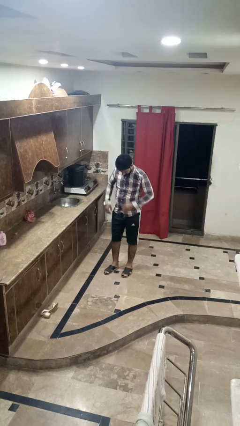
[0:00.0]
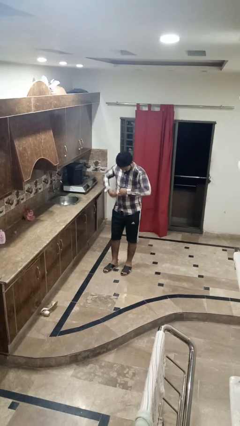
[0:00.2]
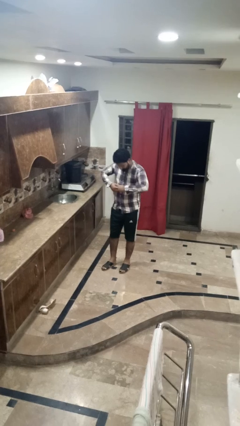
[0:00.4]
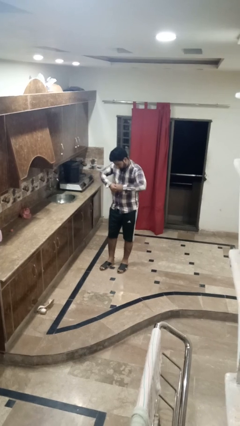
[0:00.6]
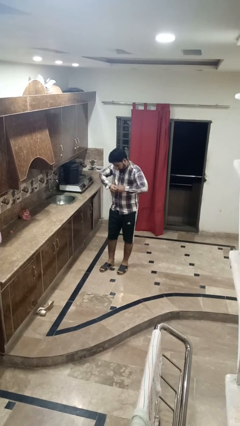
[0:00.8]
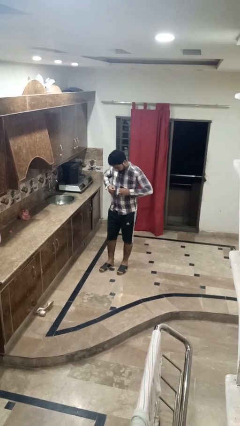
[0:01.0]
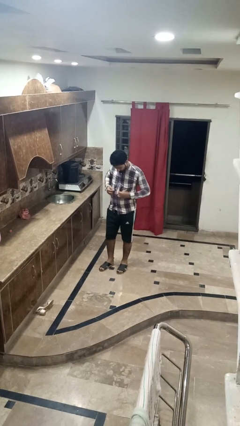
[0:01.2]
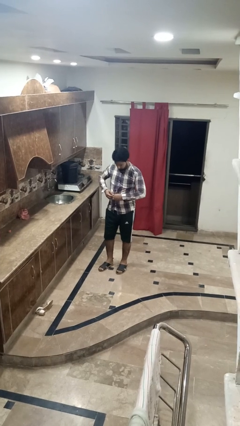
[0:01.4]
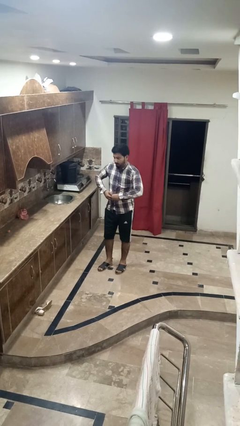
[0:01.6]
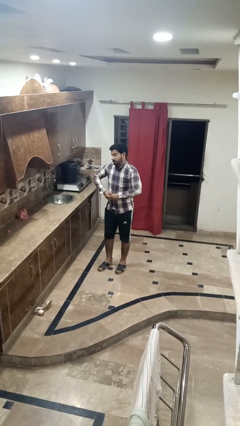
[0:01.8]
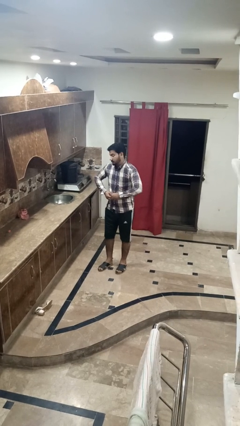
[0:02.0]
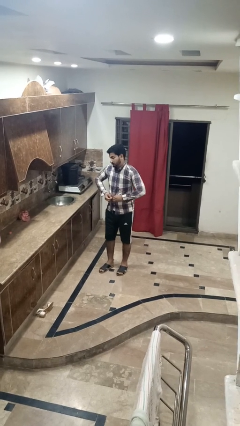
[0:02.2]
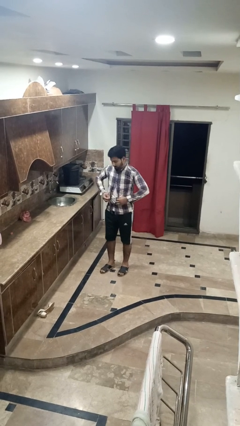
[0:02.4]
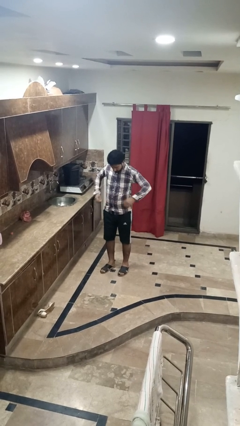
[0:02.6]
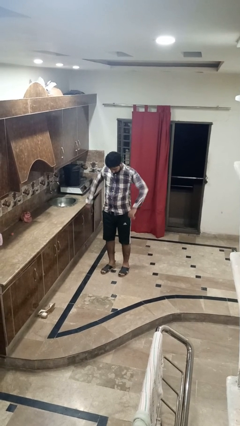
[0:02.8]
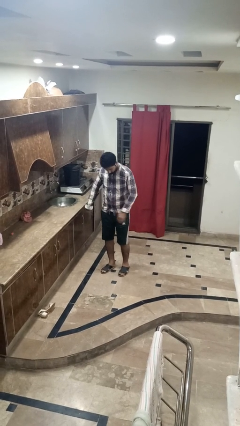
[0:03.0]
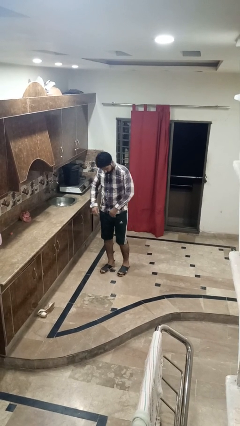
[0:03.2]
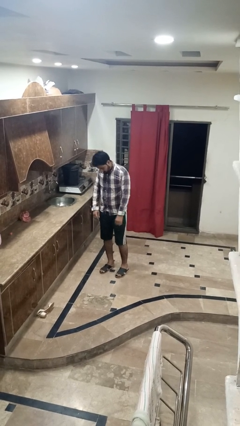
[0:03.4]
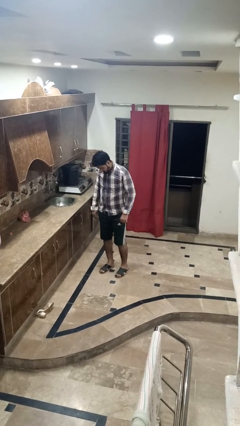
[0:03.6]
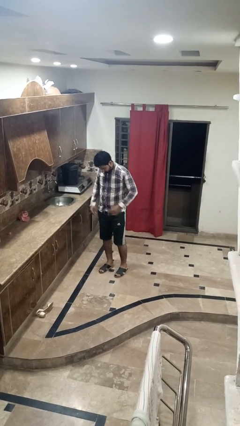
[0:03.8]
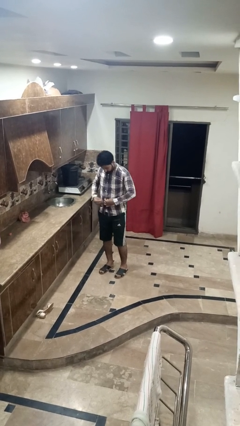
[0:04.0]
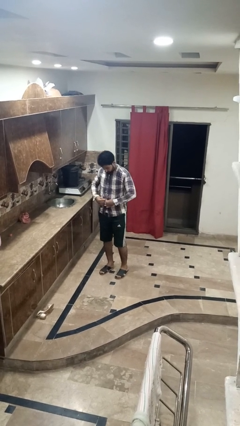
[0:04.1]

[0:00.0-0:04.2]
person unbuttons shirt

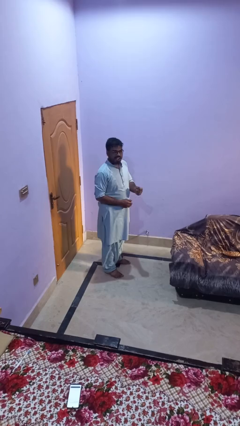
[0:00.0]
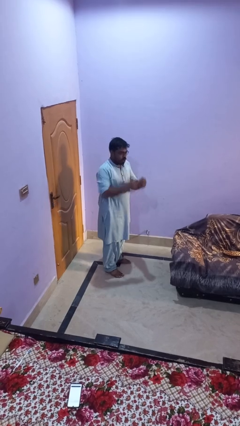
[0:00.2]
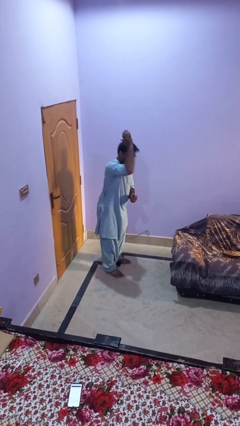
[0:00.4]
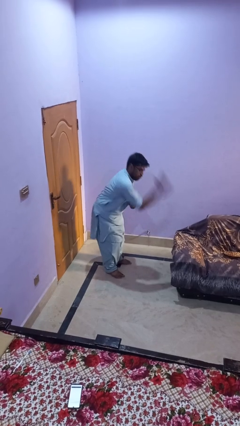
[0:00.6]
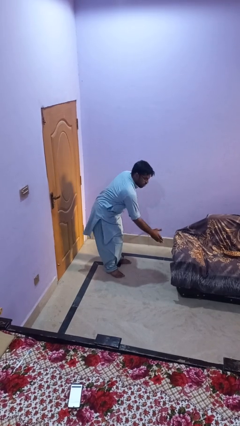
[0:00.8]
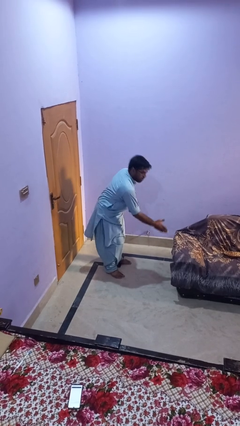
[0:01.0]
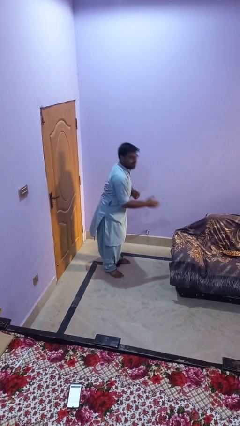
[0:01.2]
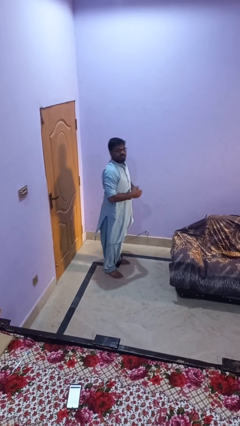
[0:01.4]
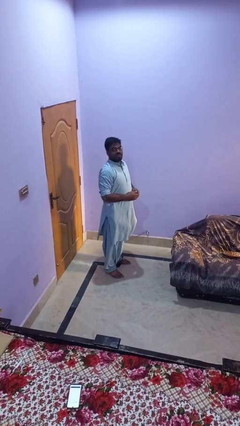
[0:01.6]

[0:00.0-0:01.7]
person karate chop

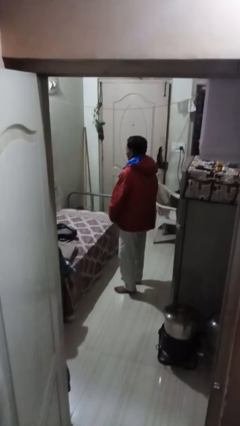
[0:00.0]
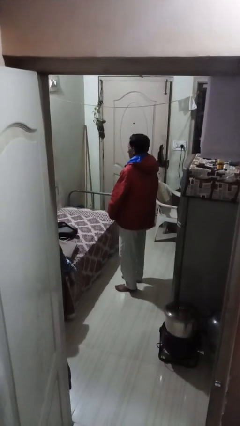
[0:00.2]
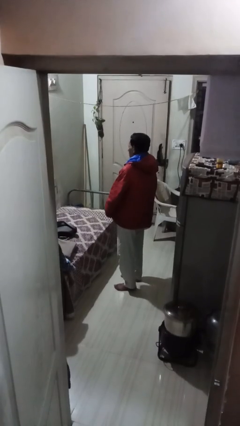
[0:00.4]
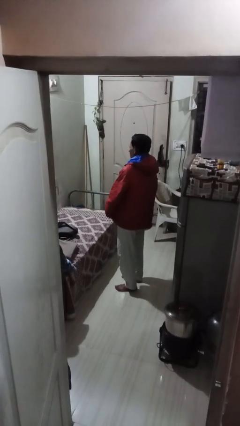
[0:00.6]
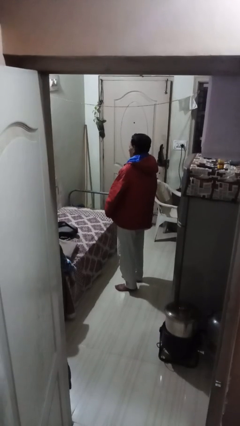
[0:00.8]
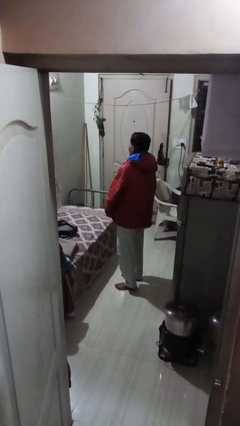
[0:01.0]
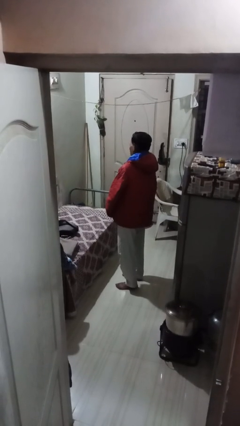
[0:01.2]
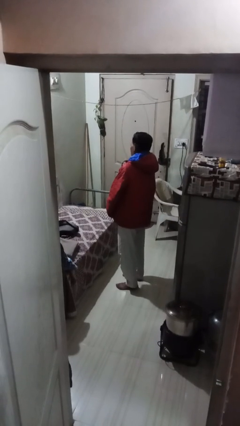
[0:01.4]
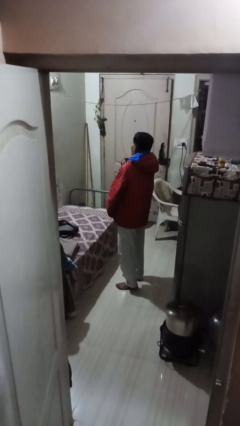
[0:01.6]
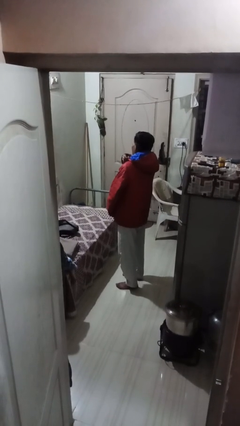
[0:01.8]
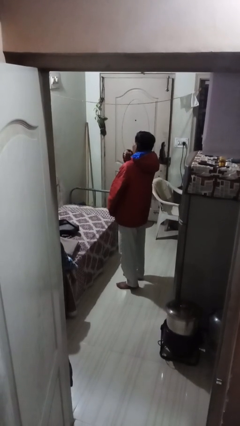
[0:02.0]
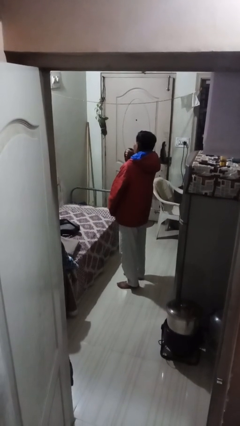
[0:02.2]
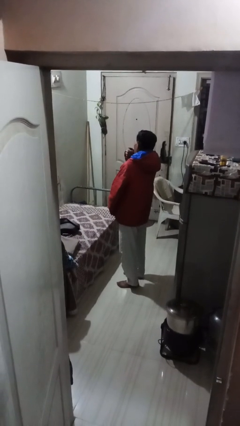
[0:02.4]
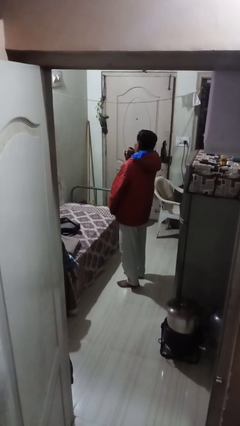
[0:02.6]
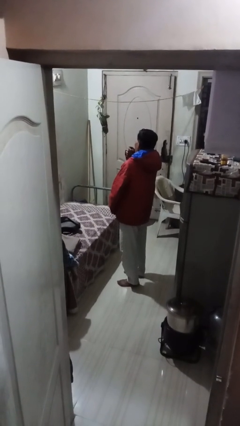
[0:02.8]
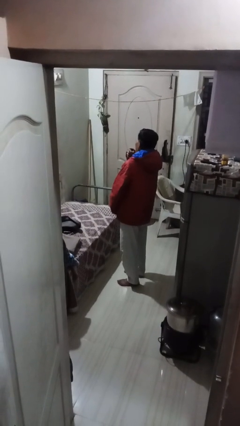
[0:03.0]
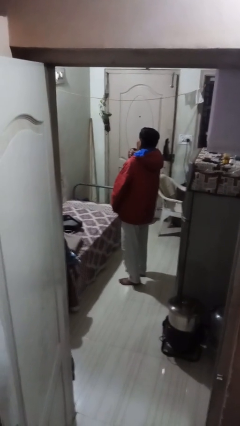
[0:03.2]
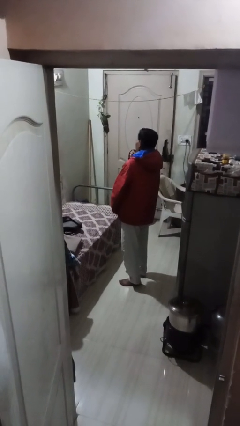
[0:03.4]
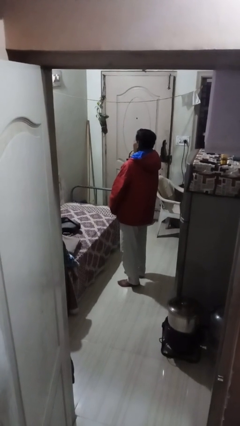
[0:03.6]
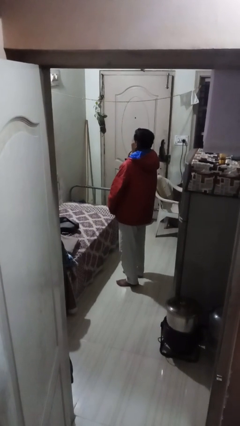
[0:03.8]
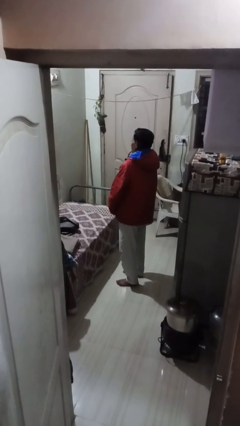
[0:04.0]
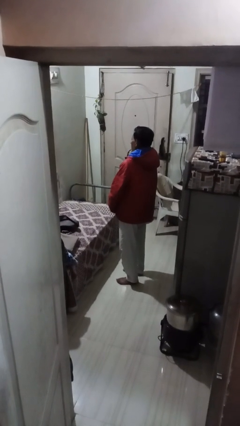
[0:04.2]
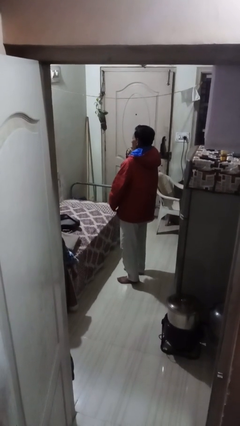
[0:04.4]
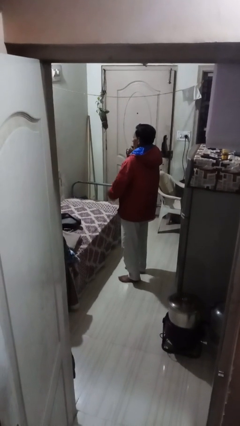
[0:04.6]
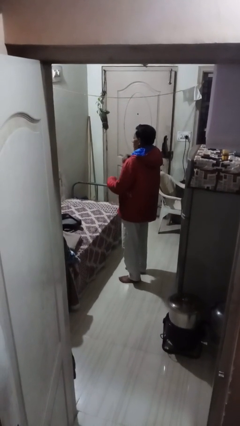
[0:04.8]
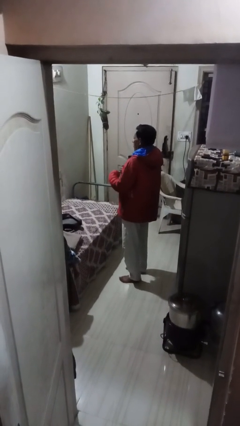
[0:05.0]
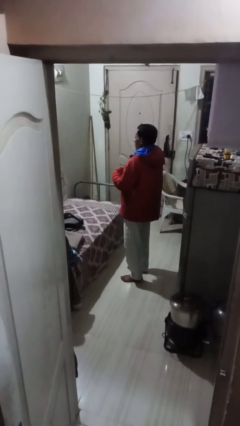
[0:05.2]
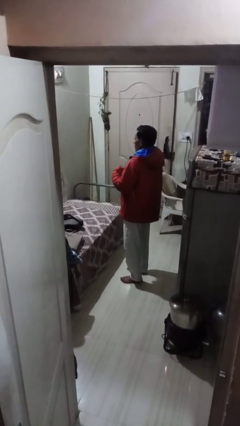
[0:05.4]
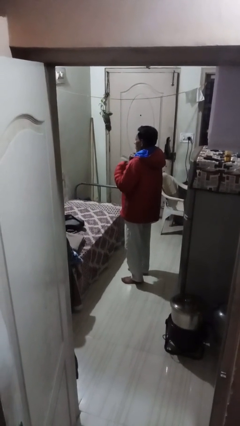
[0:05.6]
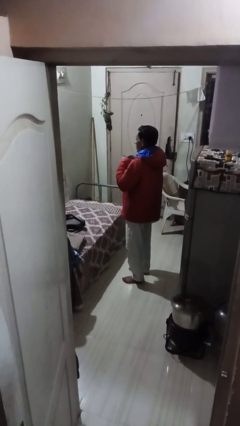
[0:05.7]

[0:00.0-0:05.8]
person zips up jacket

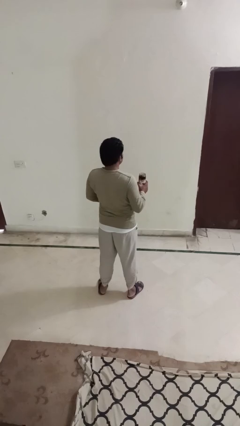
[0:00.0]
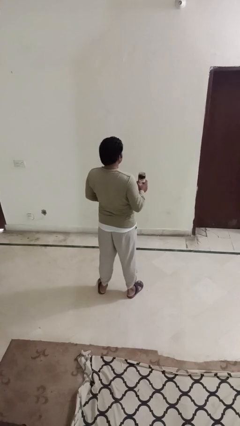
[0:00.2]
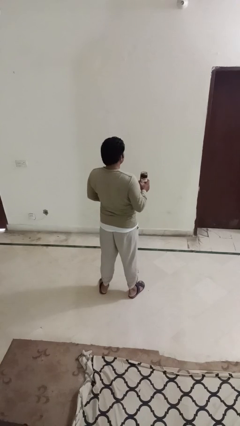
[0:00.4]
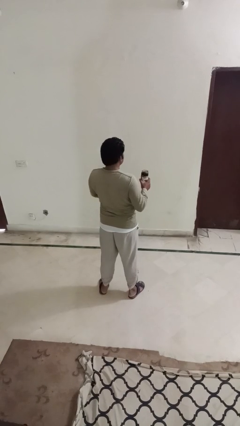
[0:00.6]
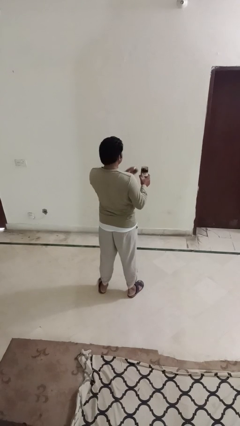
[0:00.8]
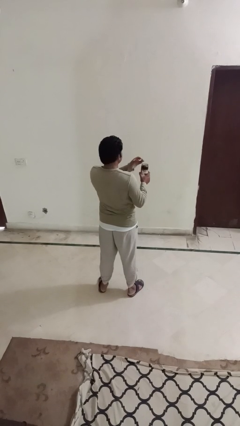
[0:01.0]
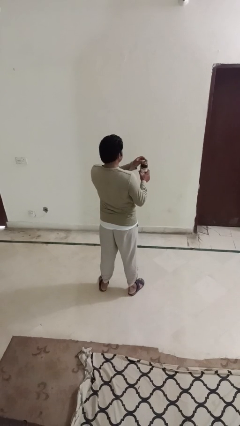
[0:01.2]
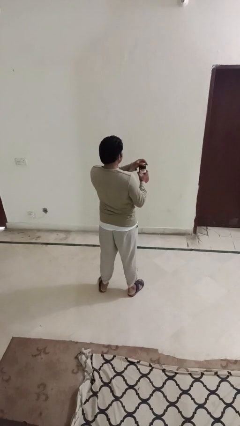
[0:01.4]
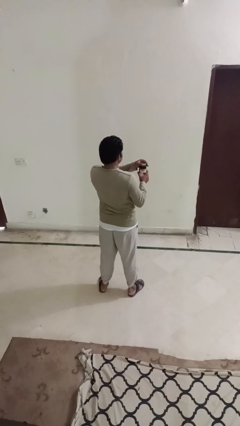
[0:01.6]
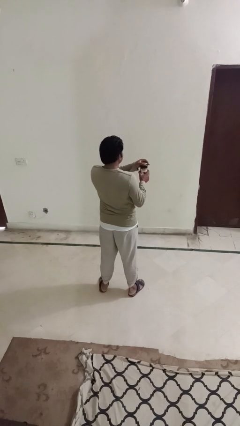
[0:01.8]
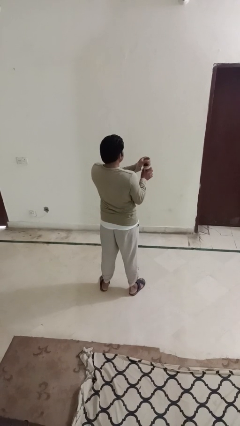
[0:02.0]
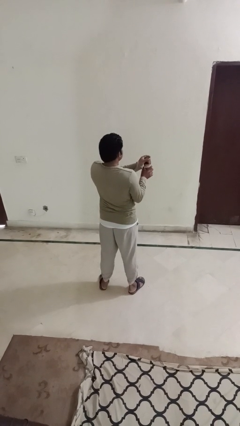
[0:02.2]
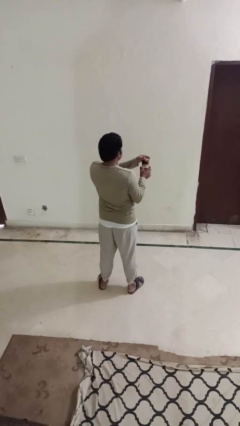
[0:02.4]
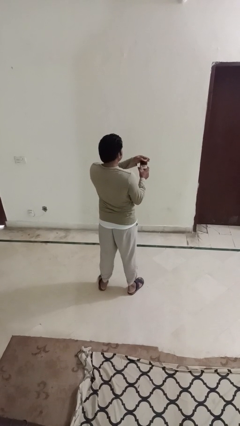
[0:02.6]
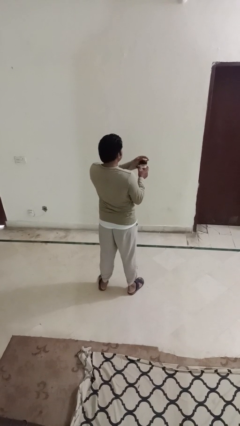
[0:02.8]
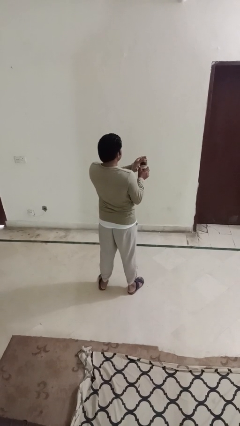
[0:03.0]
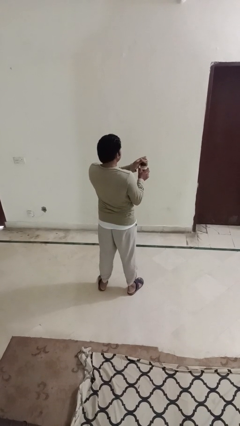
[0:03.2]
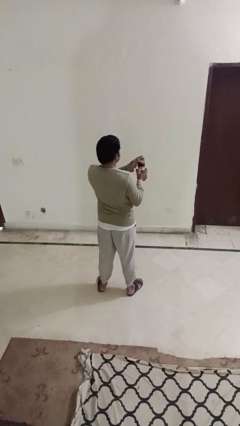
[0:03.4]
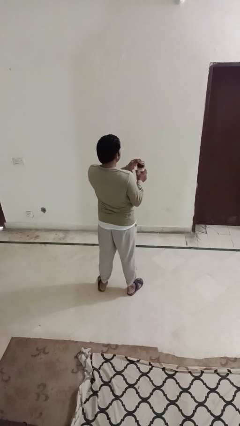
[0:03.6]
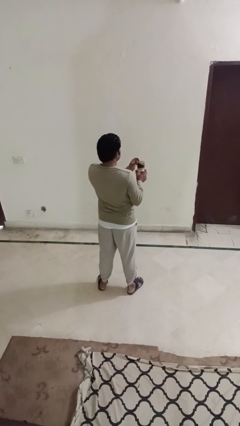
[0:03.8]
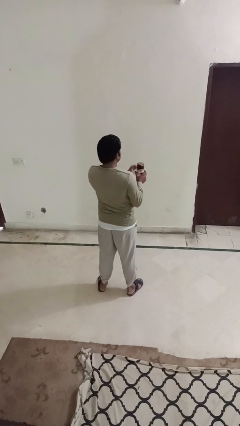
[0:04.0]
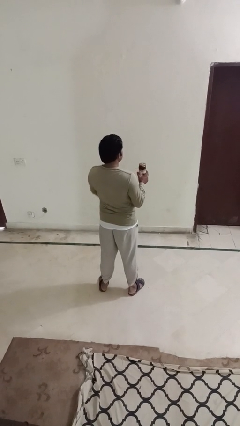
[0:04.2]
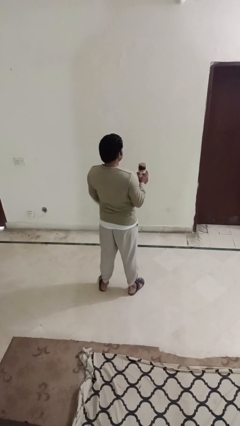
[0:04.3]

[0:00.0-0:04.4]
person closes jar

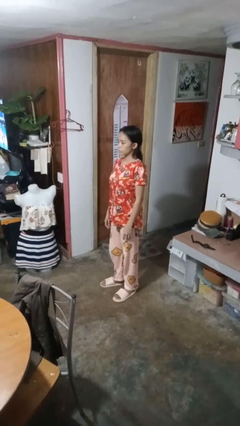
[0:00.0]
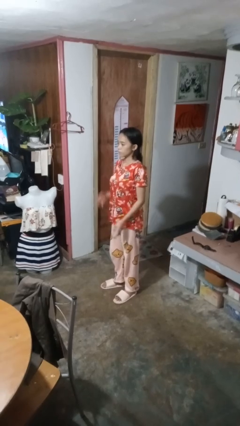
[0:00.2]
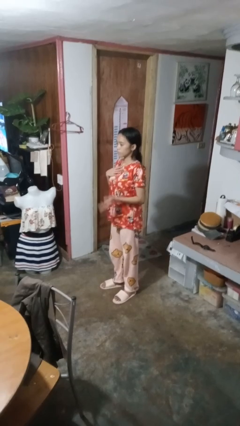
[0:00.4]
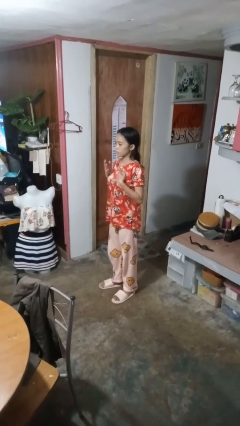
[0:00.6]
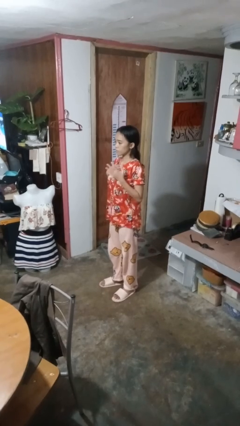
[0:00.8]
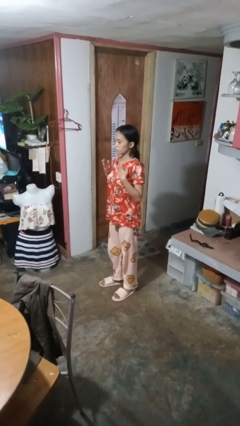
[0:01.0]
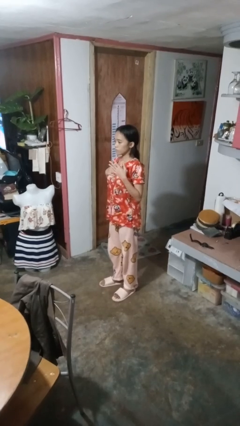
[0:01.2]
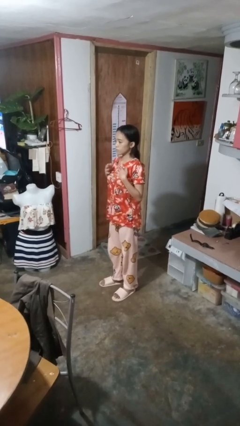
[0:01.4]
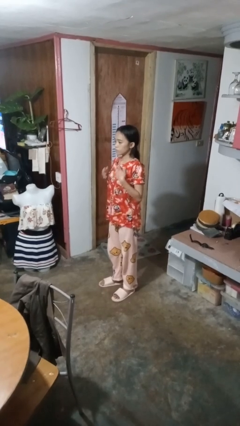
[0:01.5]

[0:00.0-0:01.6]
person drums on chest
